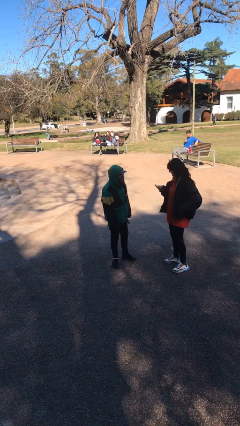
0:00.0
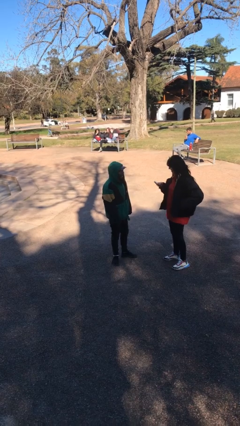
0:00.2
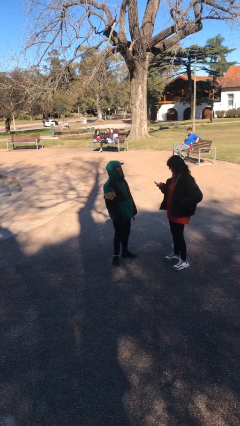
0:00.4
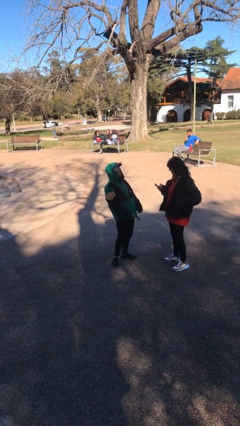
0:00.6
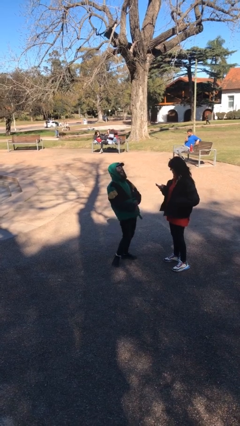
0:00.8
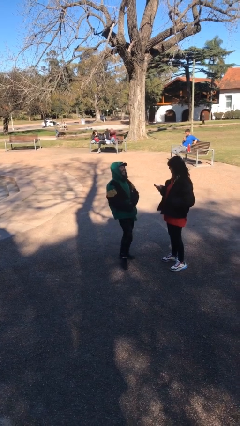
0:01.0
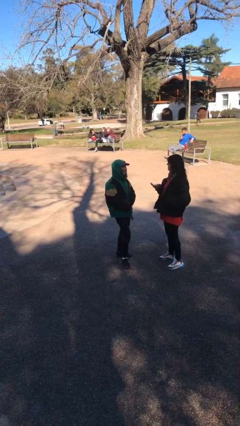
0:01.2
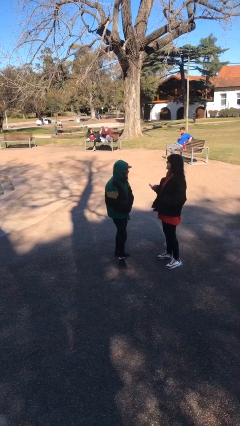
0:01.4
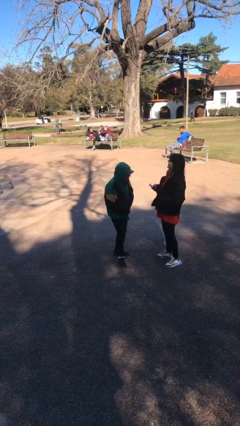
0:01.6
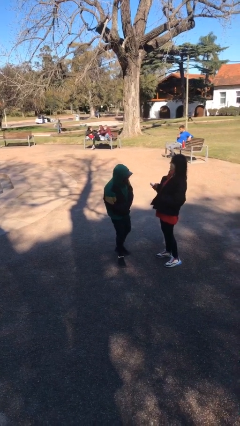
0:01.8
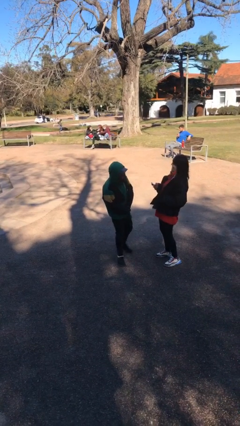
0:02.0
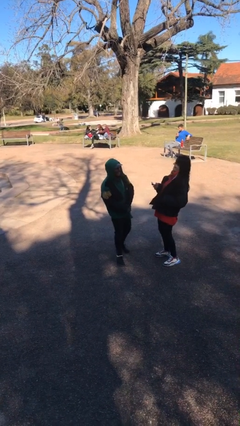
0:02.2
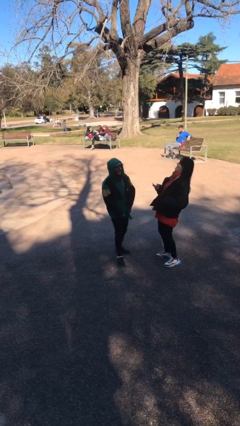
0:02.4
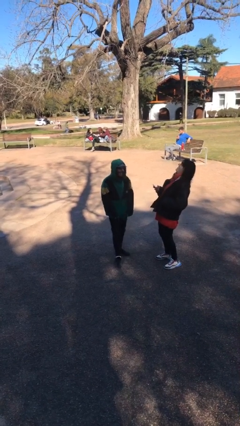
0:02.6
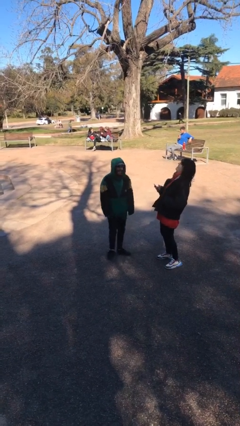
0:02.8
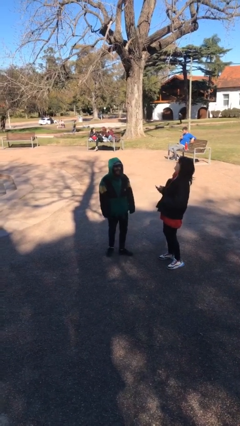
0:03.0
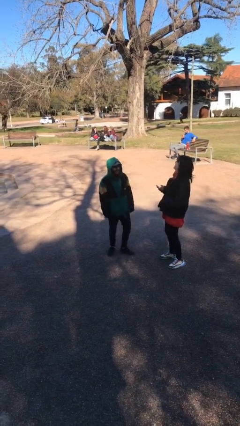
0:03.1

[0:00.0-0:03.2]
person laughs with person

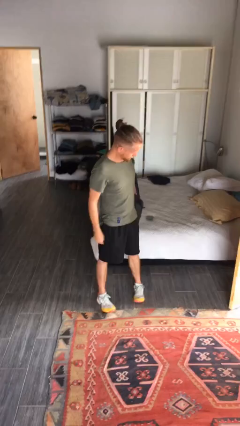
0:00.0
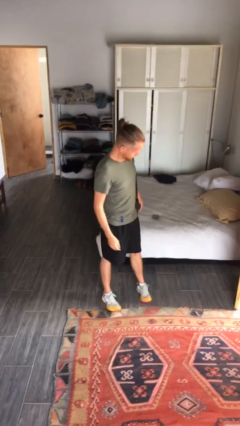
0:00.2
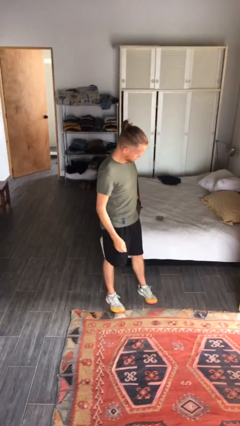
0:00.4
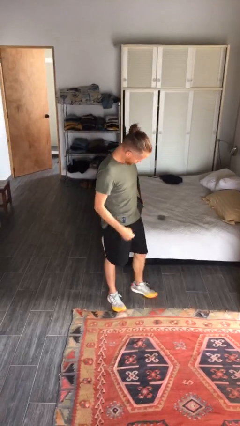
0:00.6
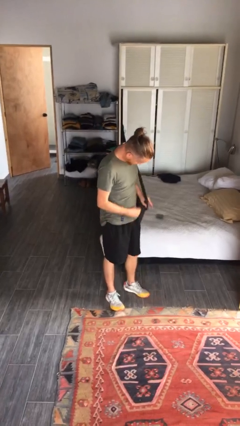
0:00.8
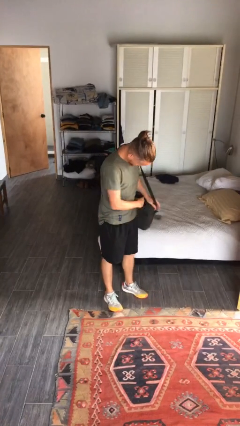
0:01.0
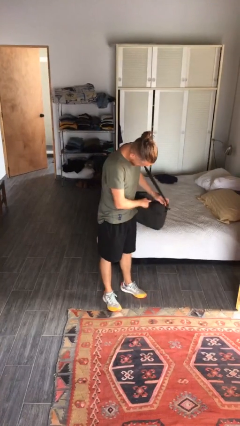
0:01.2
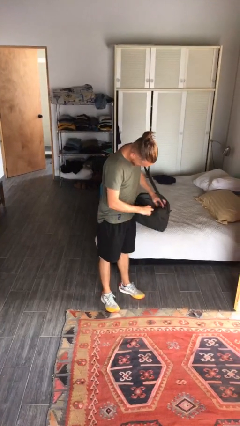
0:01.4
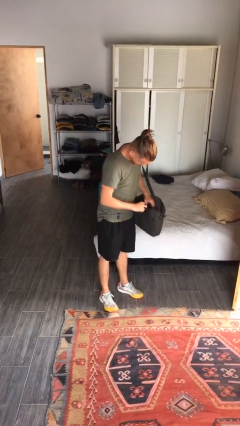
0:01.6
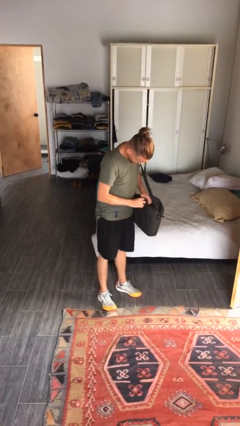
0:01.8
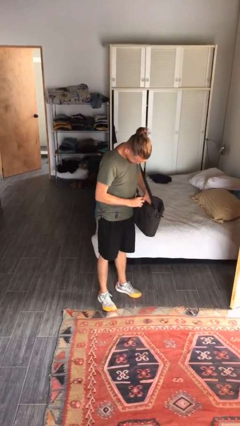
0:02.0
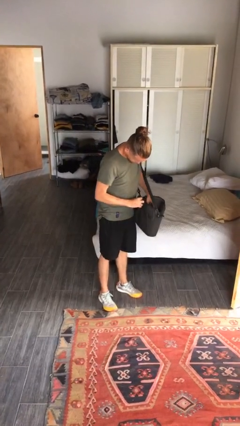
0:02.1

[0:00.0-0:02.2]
person searches in purse

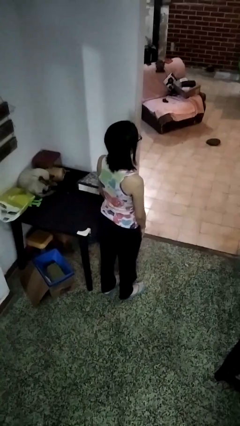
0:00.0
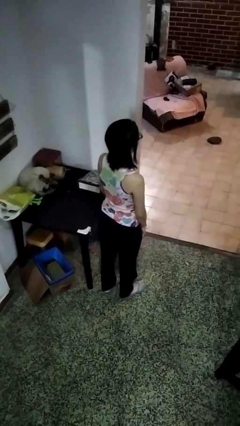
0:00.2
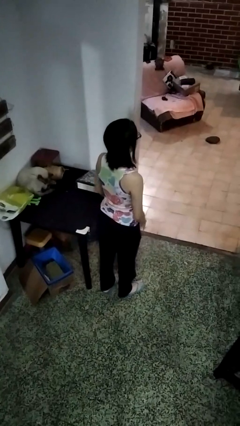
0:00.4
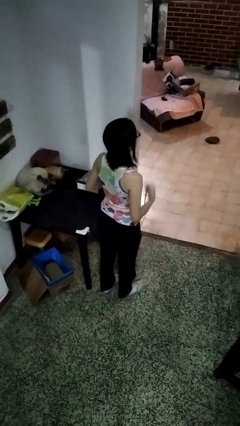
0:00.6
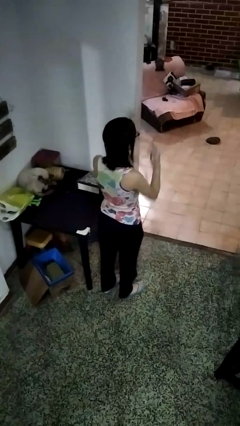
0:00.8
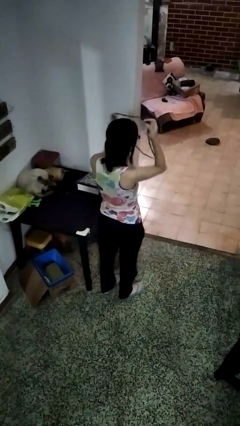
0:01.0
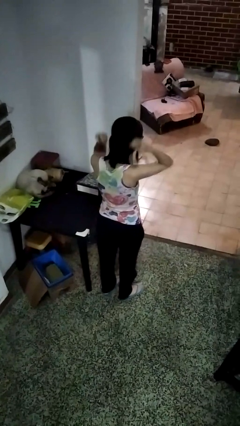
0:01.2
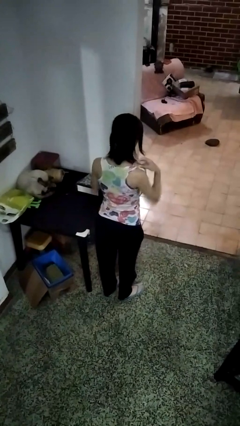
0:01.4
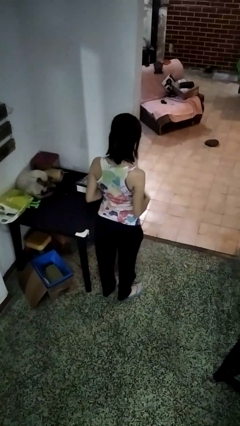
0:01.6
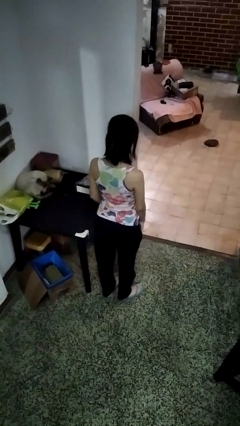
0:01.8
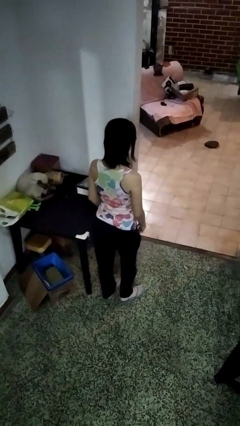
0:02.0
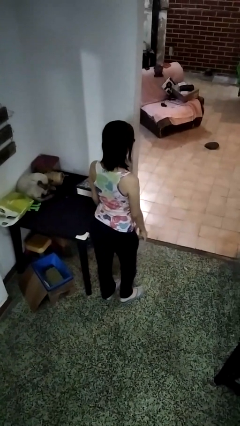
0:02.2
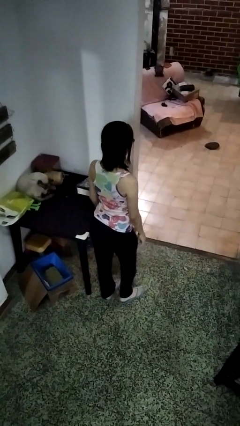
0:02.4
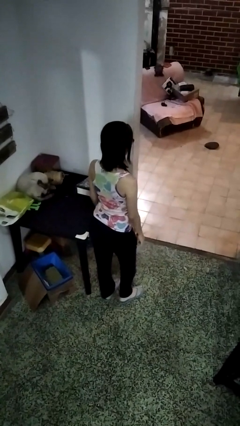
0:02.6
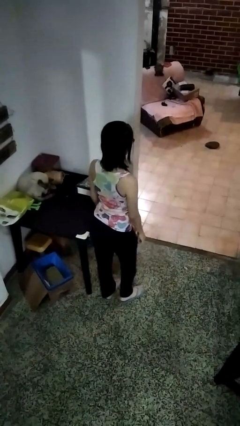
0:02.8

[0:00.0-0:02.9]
person puts on necklace

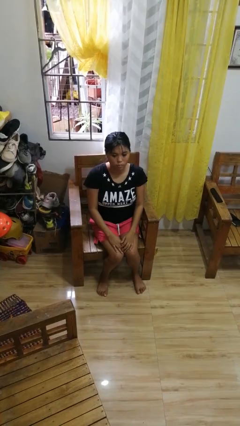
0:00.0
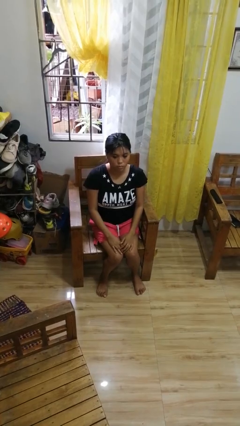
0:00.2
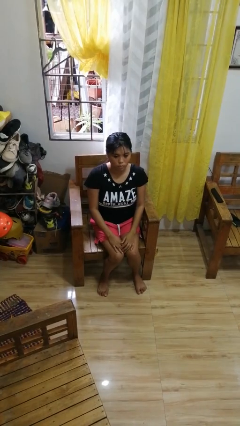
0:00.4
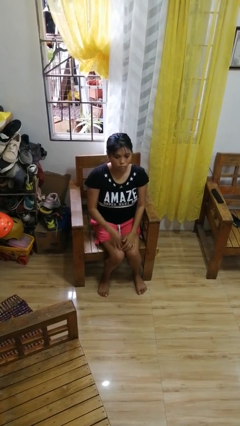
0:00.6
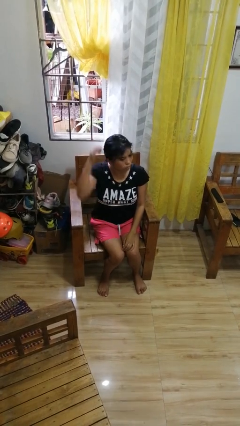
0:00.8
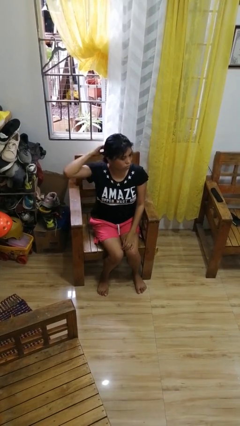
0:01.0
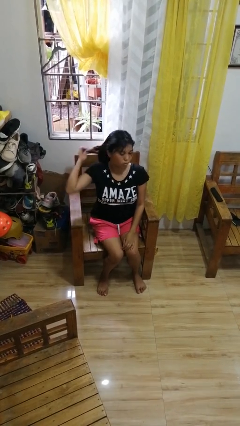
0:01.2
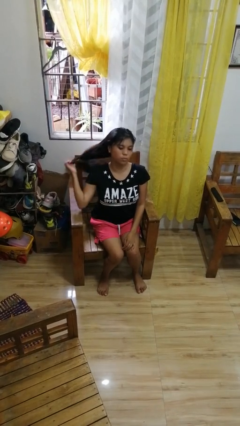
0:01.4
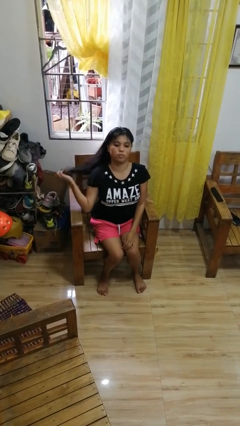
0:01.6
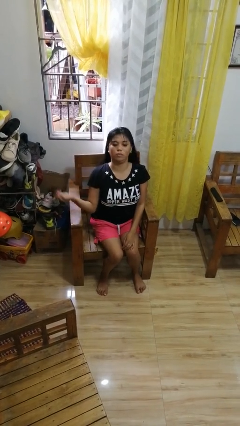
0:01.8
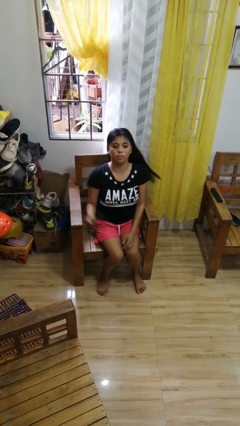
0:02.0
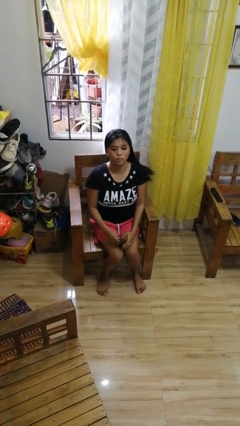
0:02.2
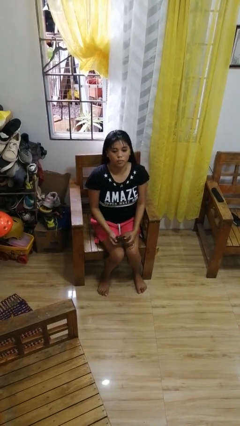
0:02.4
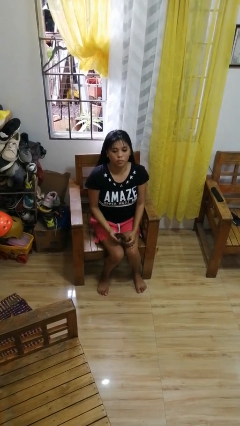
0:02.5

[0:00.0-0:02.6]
person takes off hairtie

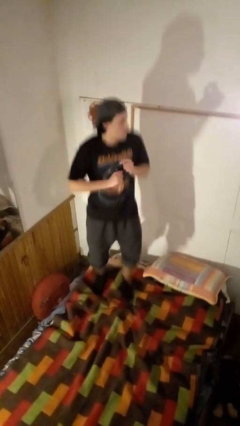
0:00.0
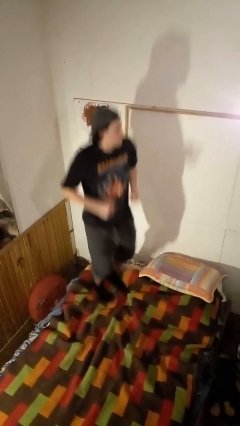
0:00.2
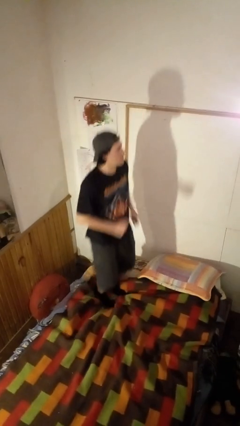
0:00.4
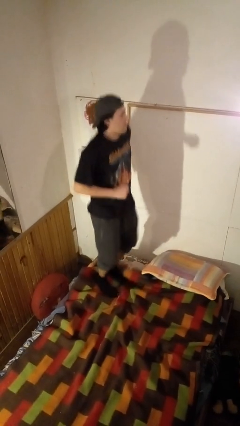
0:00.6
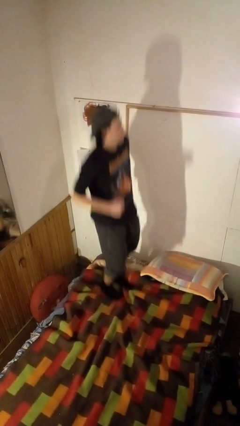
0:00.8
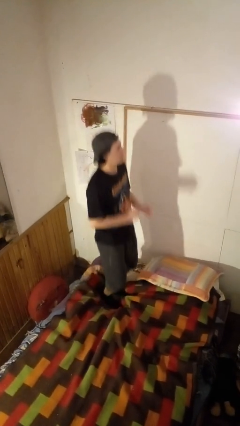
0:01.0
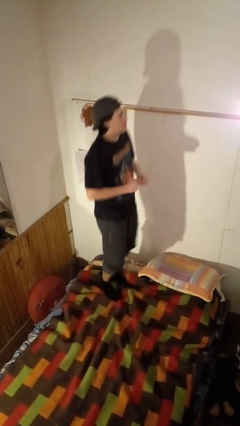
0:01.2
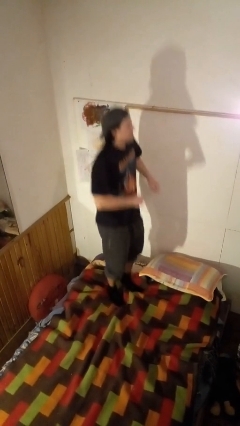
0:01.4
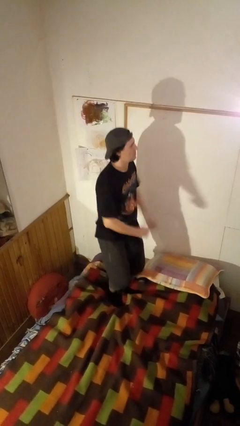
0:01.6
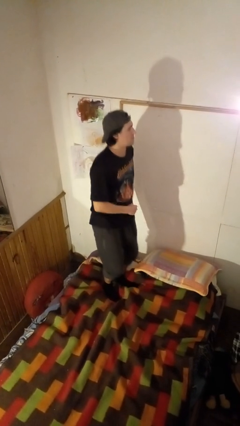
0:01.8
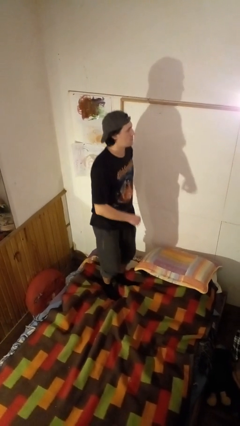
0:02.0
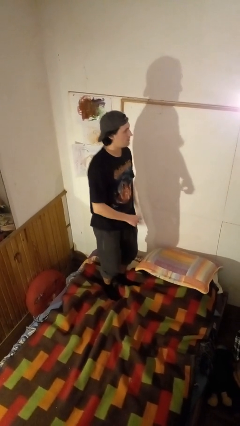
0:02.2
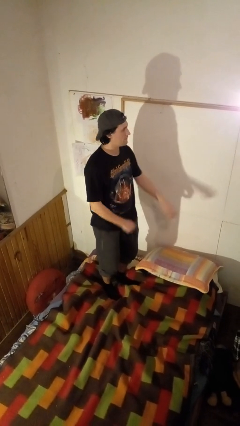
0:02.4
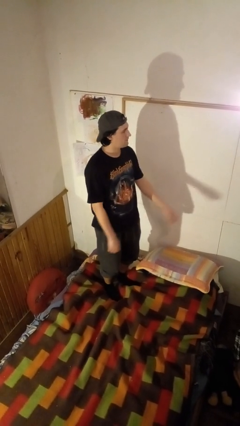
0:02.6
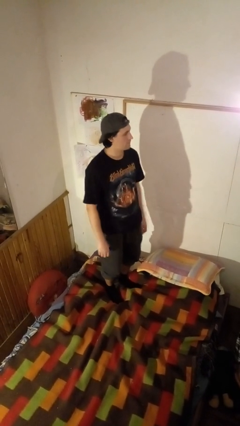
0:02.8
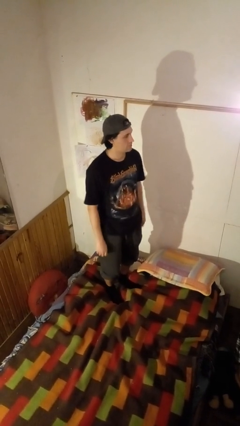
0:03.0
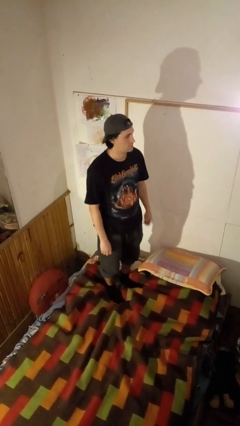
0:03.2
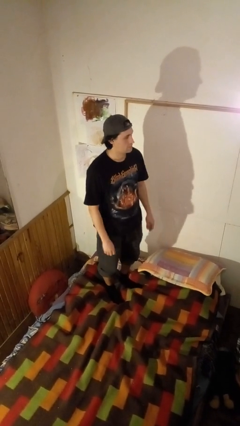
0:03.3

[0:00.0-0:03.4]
person jumps on bed

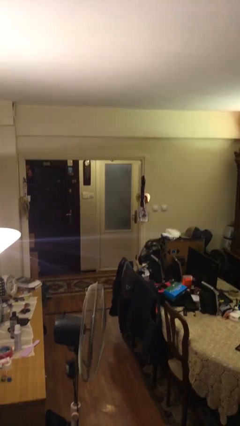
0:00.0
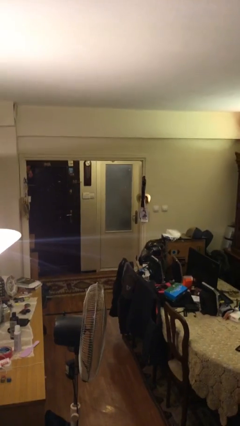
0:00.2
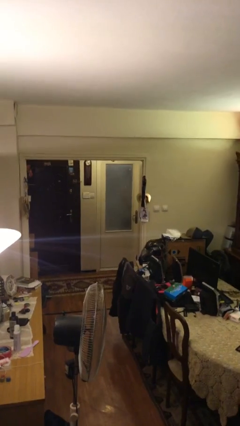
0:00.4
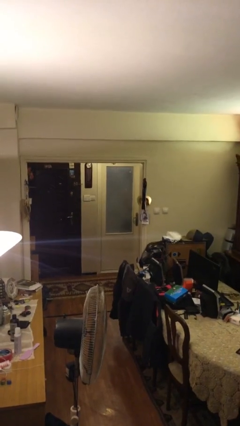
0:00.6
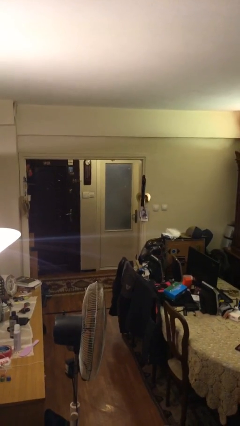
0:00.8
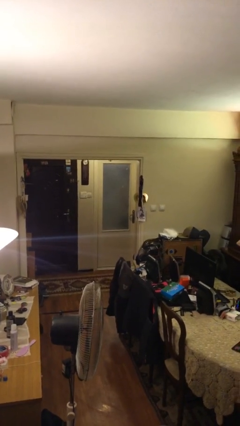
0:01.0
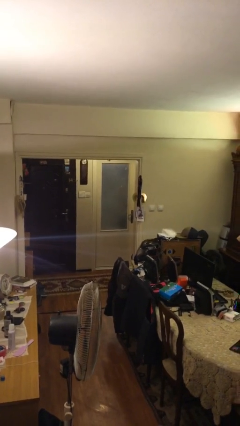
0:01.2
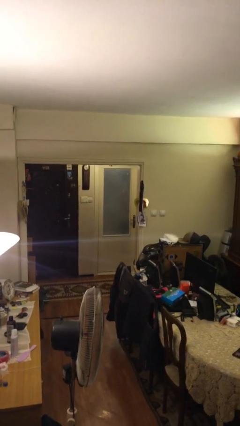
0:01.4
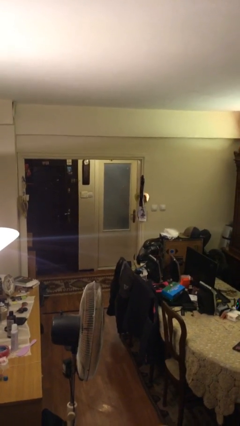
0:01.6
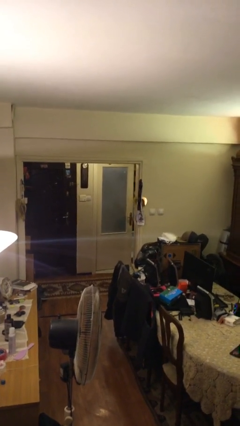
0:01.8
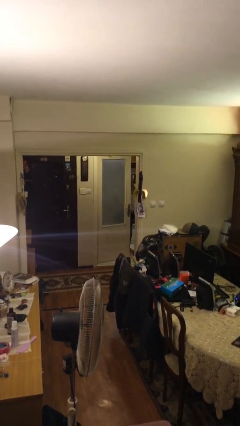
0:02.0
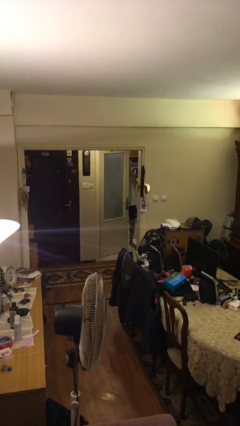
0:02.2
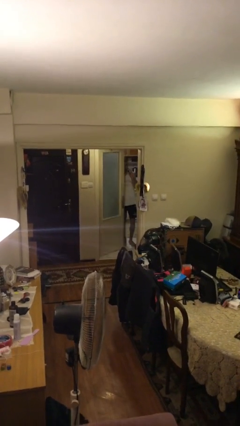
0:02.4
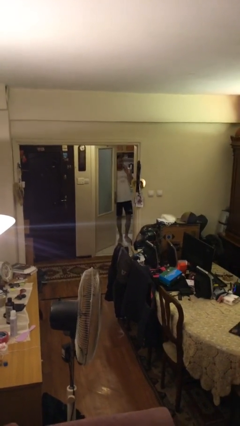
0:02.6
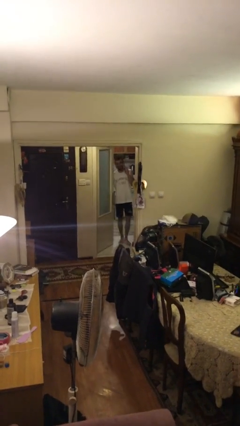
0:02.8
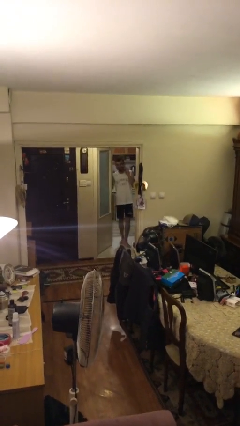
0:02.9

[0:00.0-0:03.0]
person opens facility door
